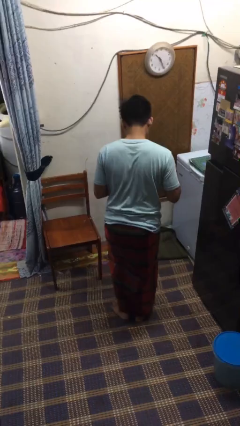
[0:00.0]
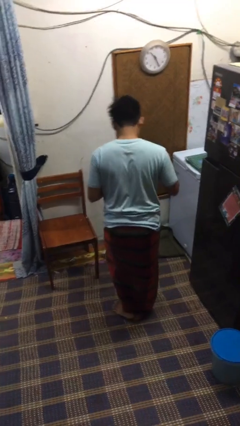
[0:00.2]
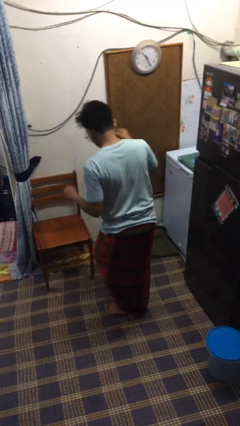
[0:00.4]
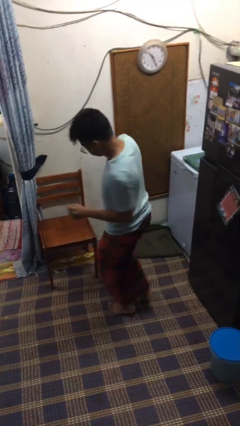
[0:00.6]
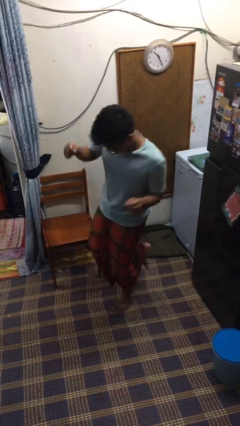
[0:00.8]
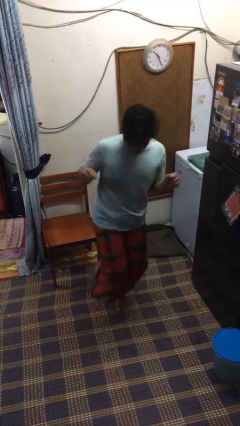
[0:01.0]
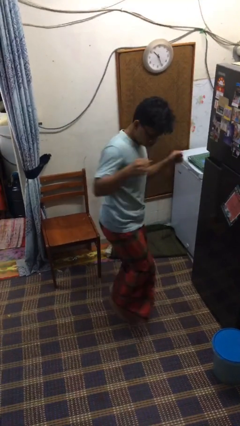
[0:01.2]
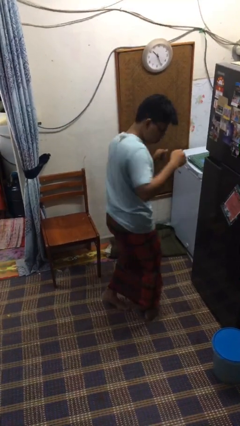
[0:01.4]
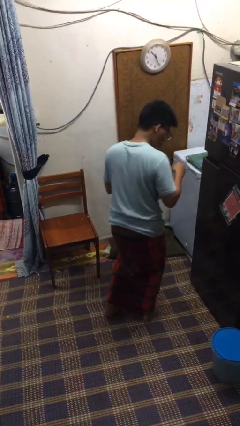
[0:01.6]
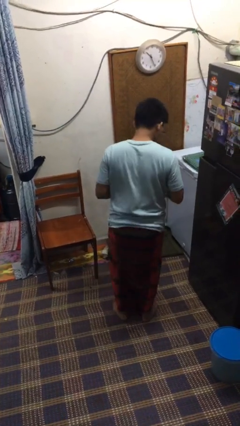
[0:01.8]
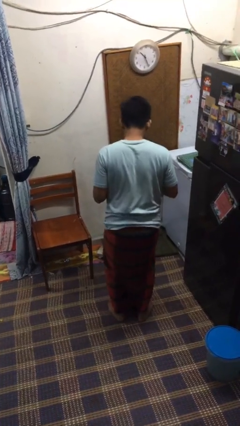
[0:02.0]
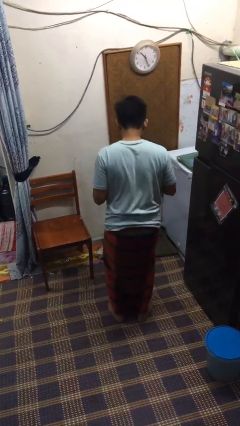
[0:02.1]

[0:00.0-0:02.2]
person twirls

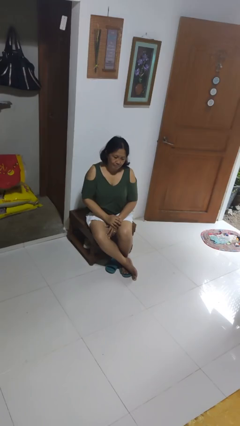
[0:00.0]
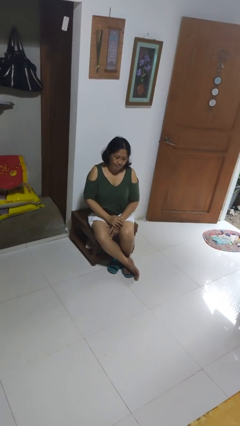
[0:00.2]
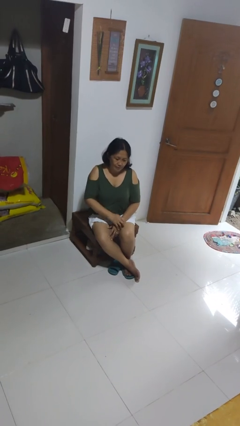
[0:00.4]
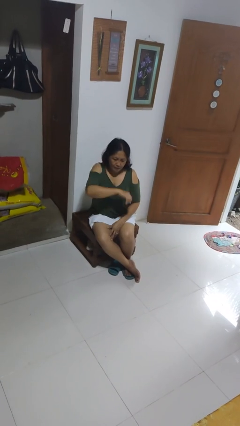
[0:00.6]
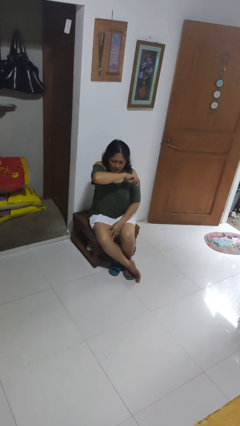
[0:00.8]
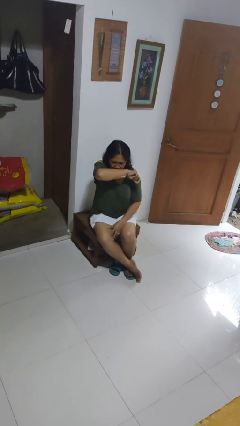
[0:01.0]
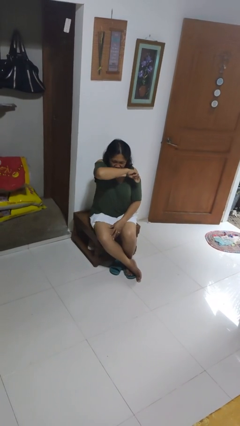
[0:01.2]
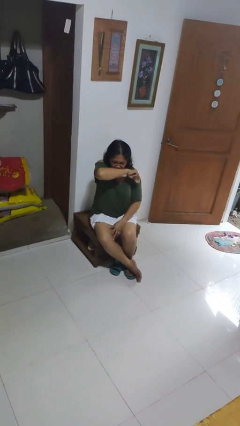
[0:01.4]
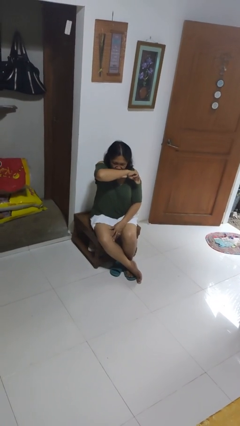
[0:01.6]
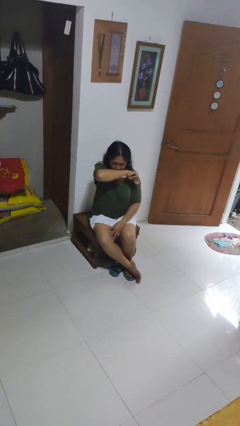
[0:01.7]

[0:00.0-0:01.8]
person sneezes into arm

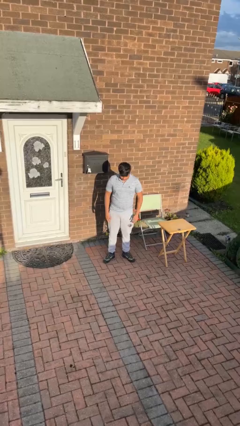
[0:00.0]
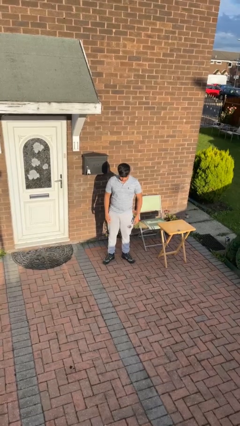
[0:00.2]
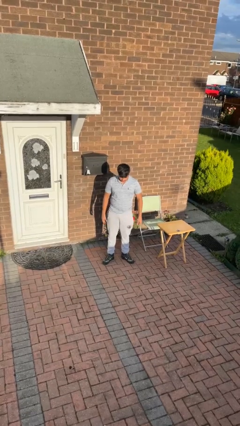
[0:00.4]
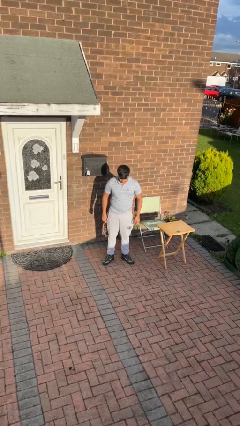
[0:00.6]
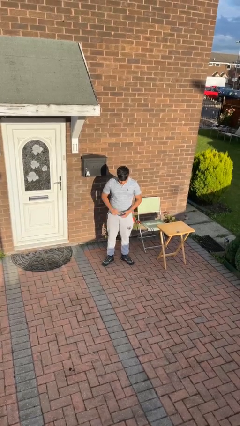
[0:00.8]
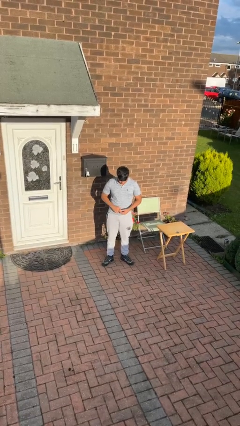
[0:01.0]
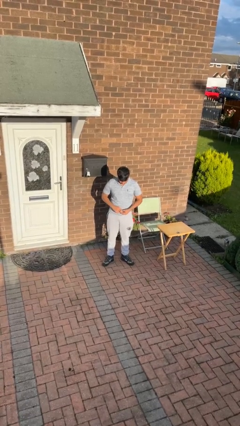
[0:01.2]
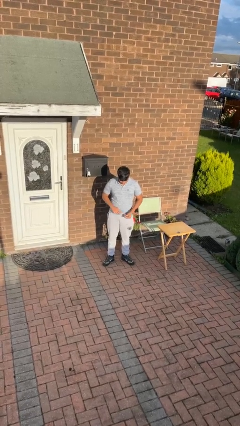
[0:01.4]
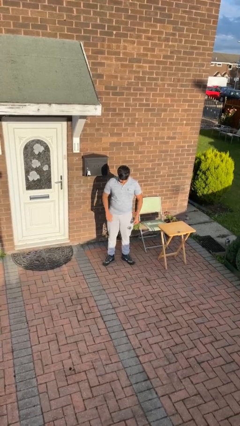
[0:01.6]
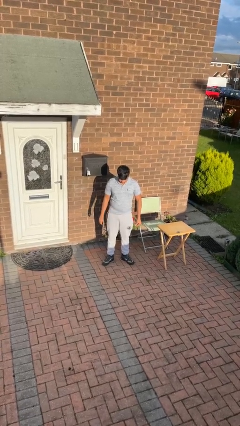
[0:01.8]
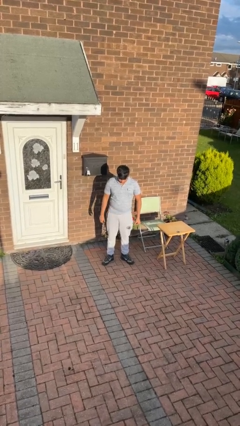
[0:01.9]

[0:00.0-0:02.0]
person takes off ring

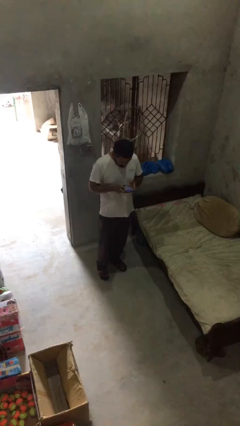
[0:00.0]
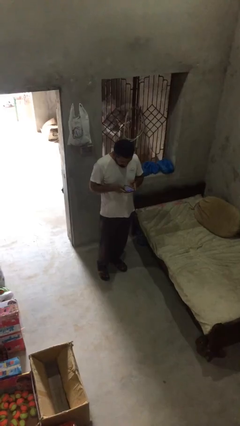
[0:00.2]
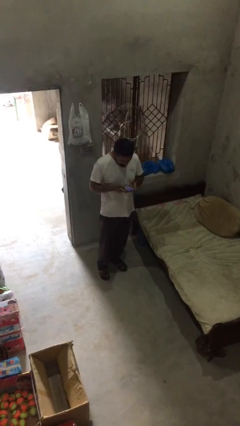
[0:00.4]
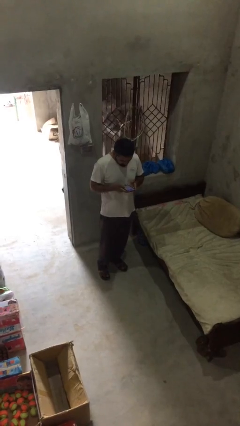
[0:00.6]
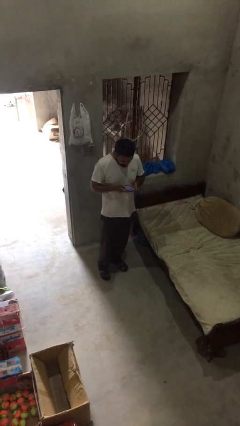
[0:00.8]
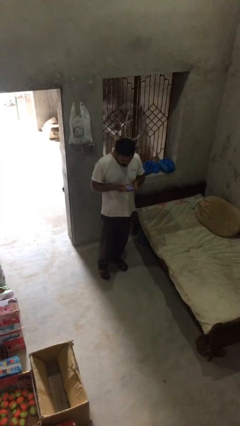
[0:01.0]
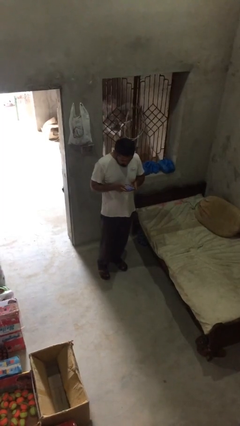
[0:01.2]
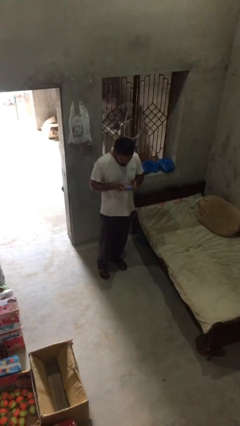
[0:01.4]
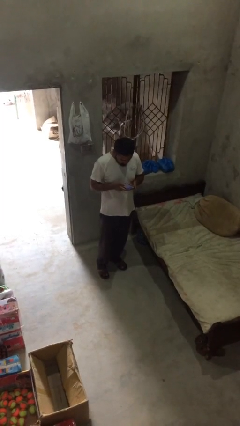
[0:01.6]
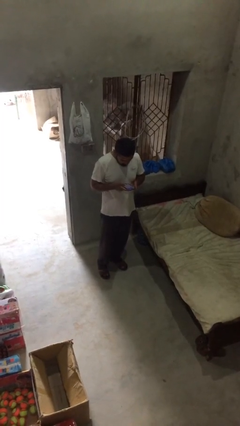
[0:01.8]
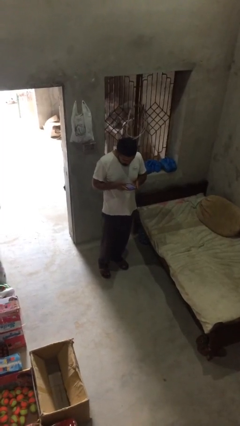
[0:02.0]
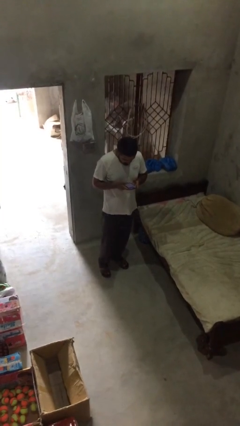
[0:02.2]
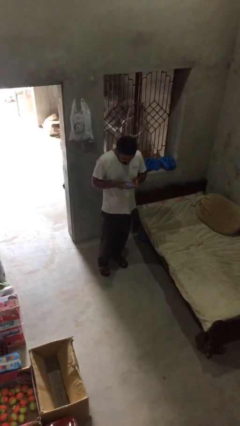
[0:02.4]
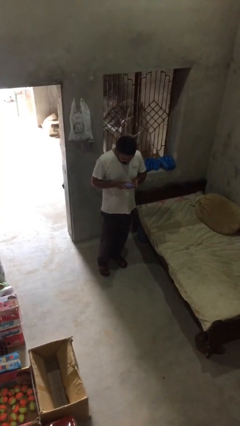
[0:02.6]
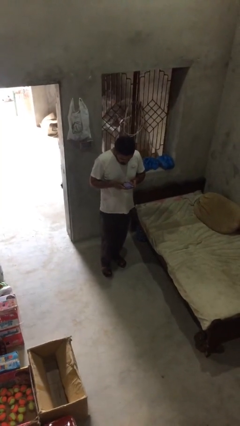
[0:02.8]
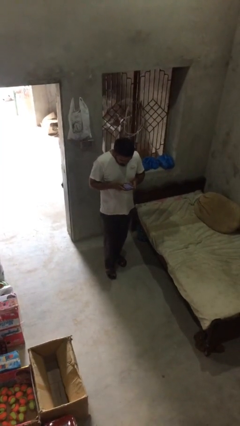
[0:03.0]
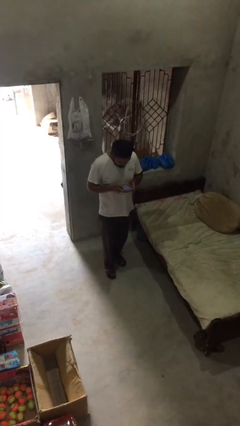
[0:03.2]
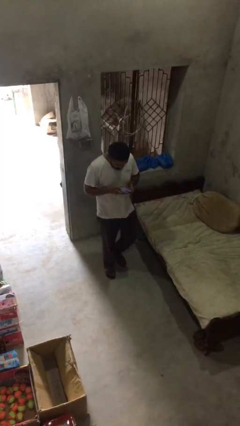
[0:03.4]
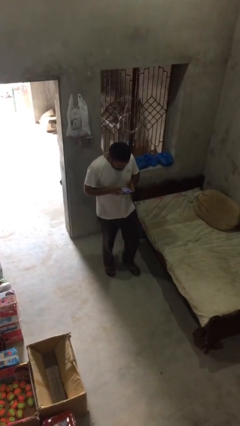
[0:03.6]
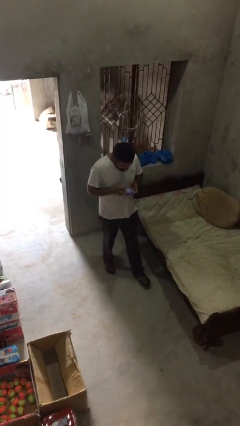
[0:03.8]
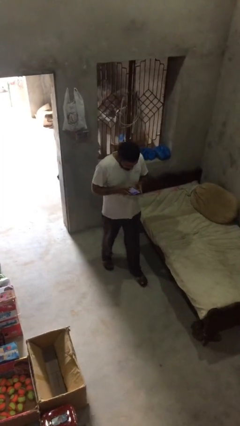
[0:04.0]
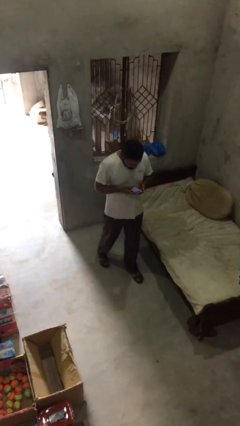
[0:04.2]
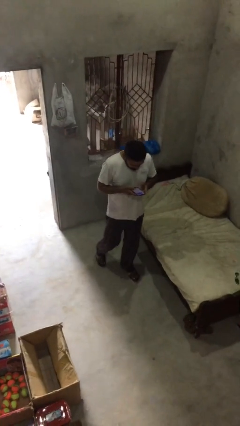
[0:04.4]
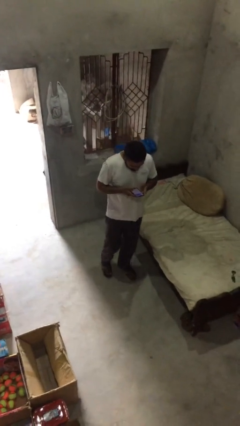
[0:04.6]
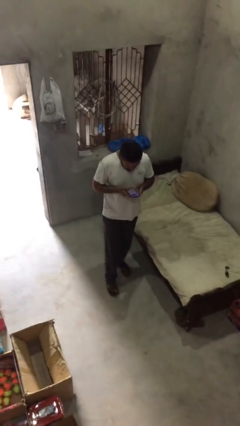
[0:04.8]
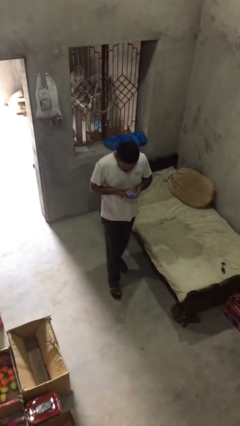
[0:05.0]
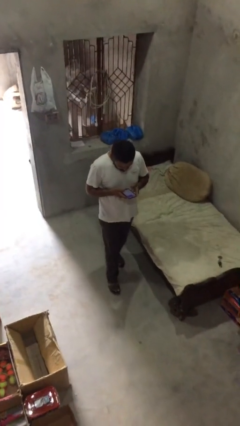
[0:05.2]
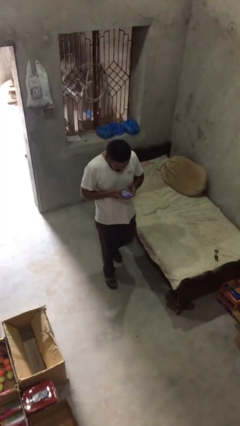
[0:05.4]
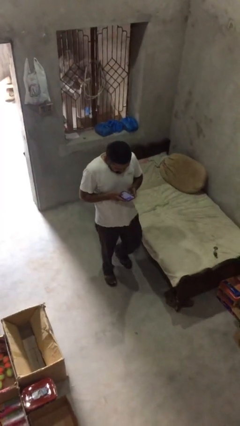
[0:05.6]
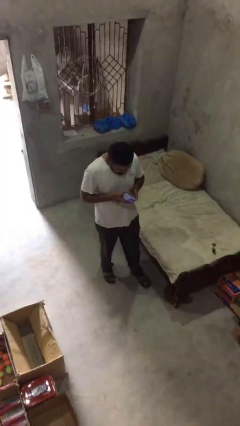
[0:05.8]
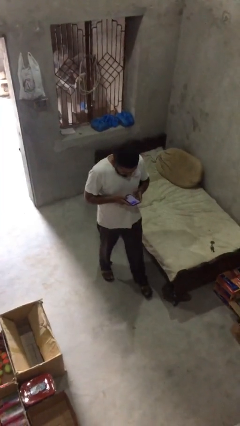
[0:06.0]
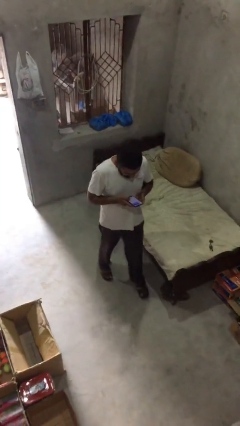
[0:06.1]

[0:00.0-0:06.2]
person texts on phone

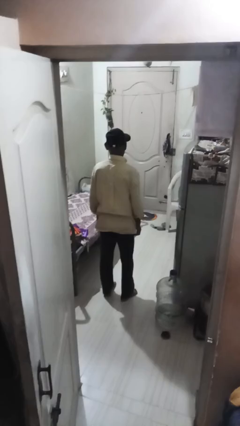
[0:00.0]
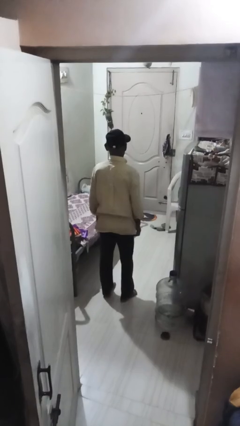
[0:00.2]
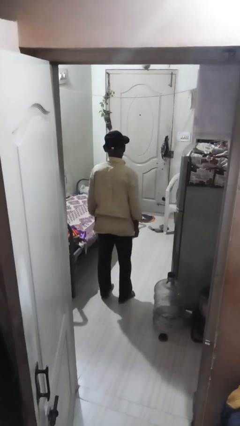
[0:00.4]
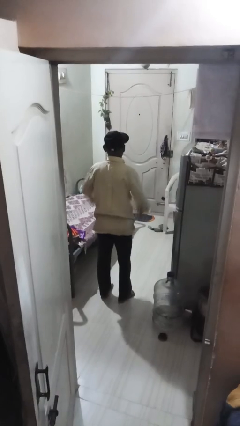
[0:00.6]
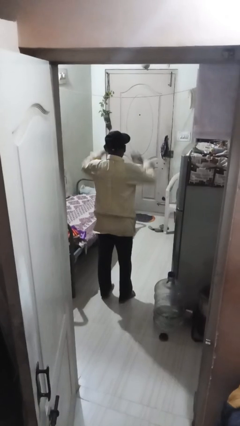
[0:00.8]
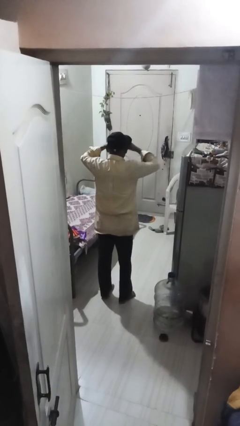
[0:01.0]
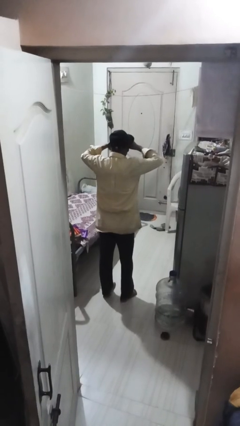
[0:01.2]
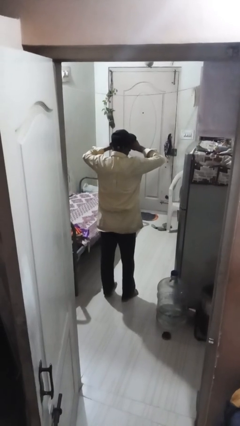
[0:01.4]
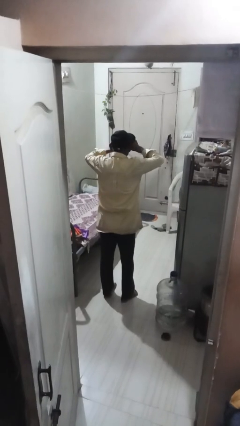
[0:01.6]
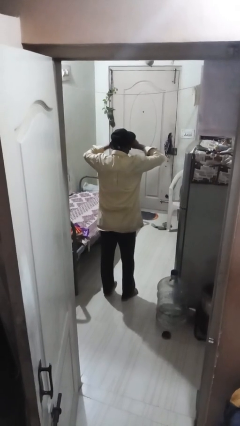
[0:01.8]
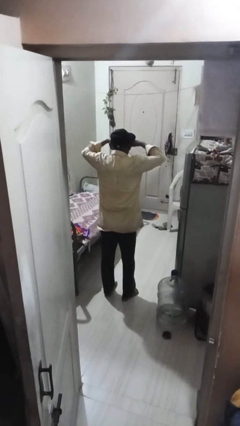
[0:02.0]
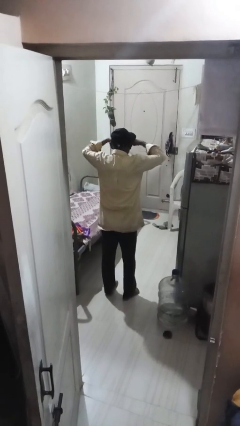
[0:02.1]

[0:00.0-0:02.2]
person rubs eyes

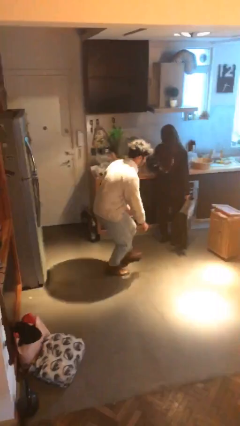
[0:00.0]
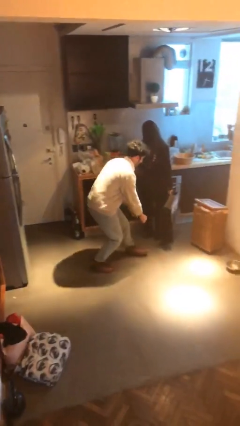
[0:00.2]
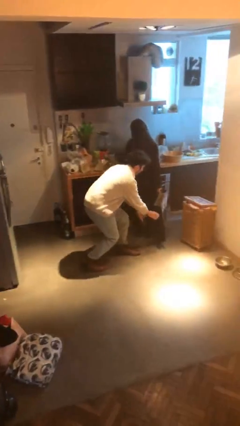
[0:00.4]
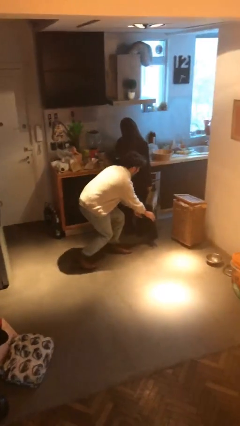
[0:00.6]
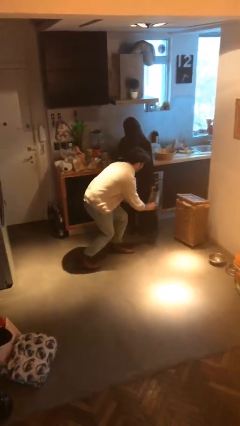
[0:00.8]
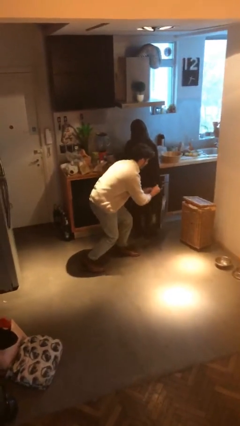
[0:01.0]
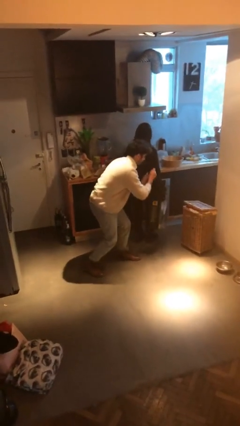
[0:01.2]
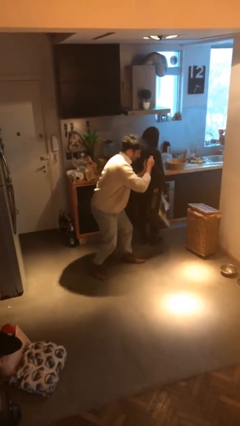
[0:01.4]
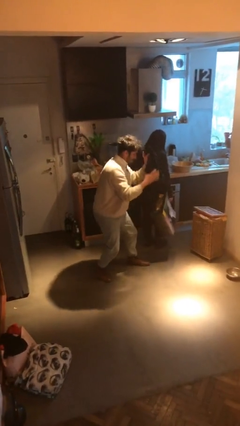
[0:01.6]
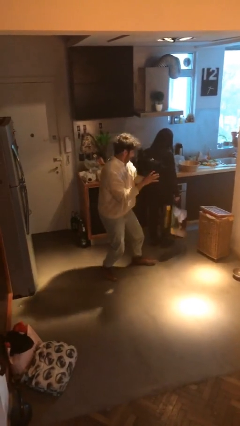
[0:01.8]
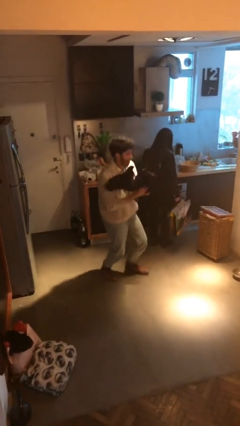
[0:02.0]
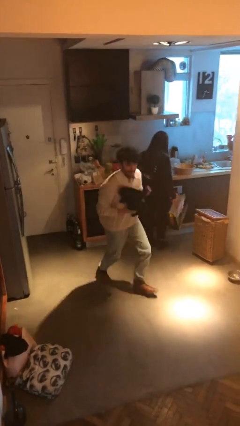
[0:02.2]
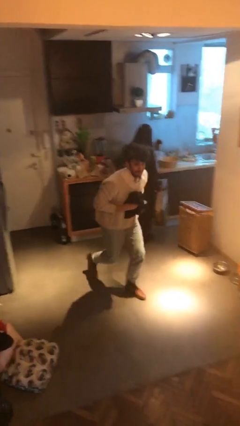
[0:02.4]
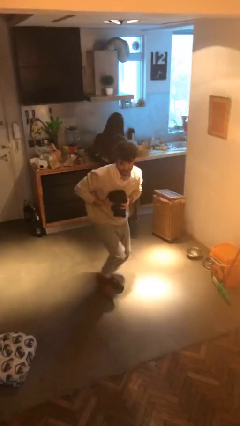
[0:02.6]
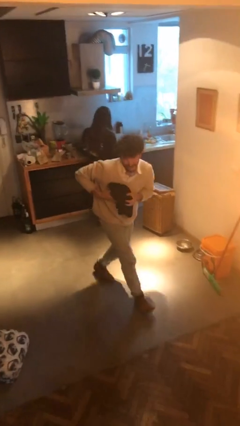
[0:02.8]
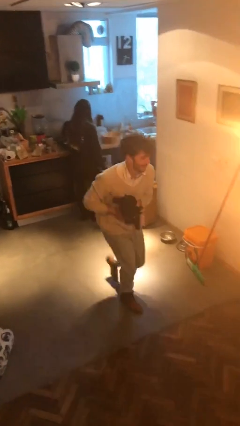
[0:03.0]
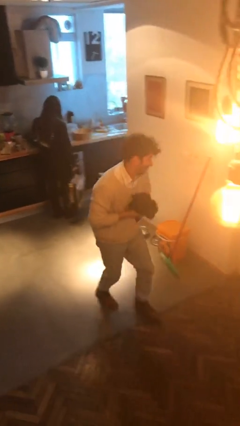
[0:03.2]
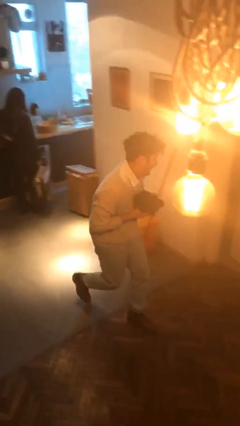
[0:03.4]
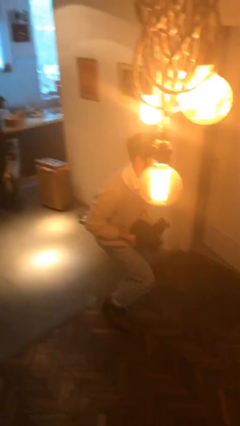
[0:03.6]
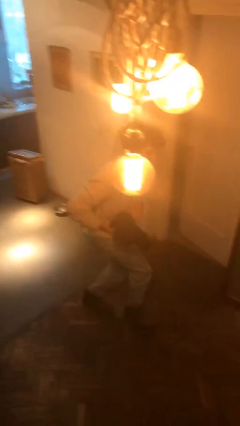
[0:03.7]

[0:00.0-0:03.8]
person steals object from person
